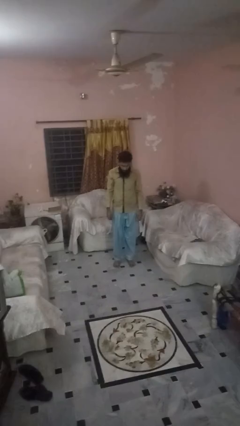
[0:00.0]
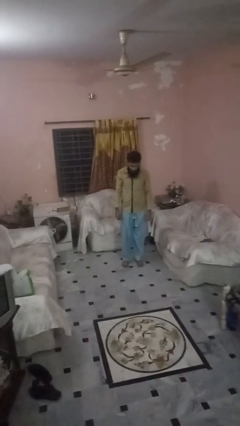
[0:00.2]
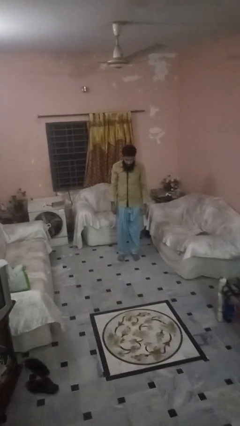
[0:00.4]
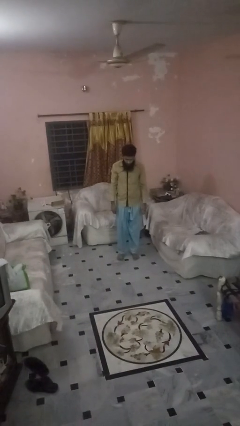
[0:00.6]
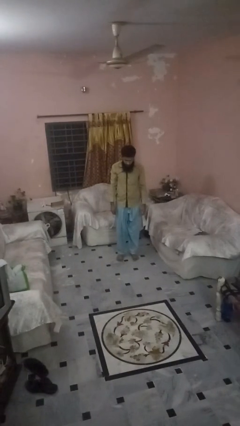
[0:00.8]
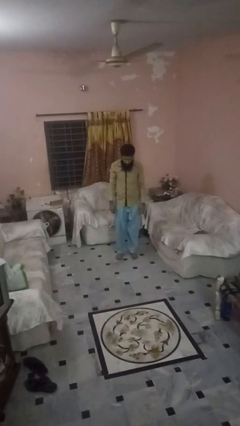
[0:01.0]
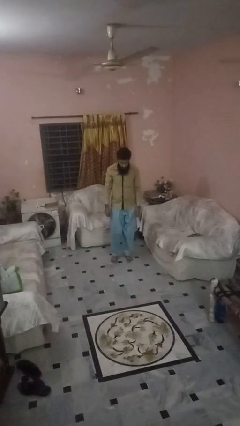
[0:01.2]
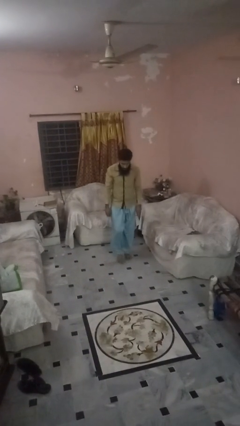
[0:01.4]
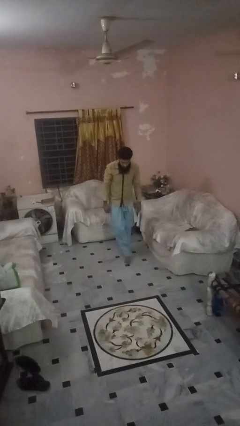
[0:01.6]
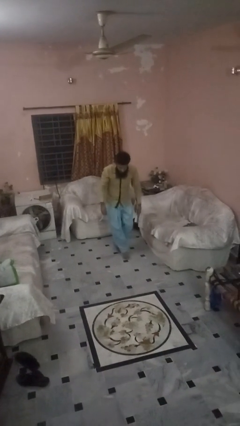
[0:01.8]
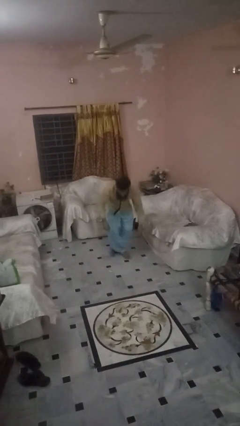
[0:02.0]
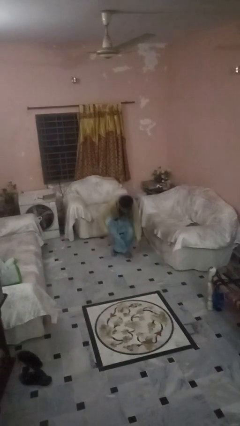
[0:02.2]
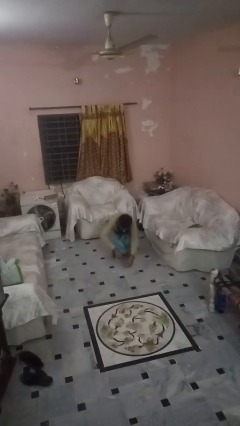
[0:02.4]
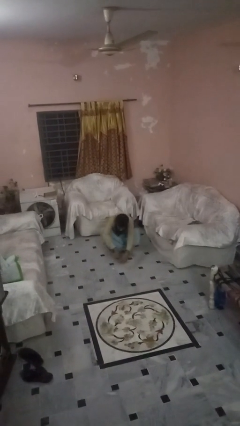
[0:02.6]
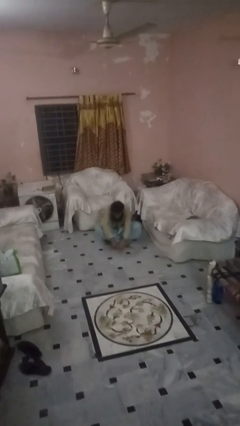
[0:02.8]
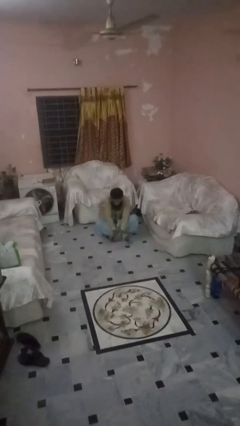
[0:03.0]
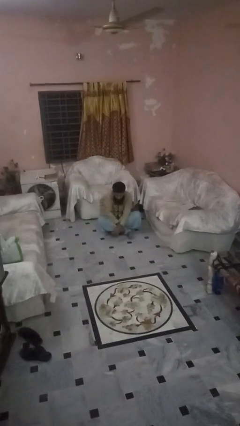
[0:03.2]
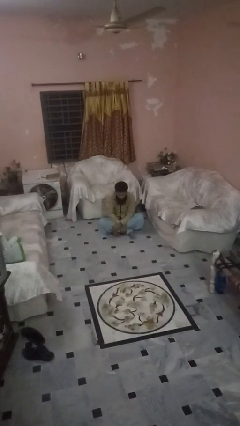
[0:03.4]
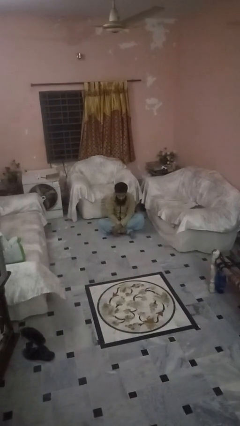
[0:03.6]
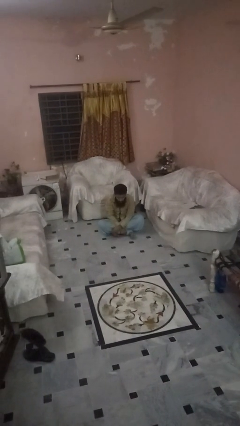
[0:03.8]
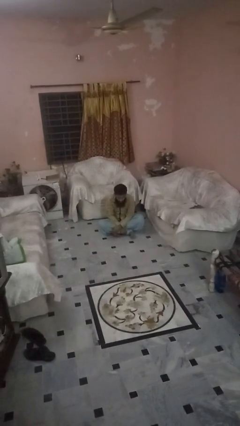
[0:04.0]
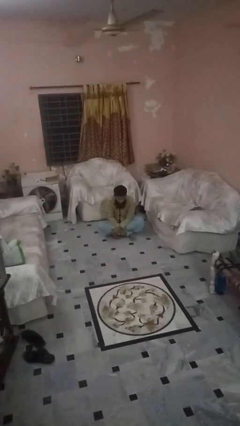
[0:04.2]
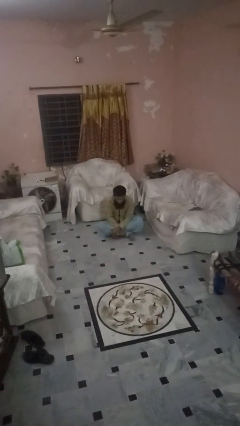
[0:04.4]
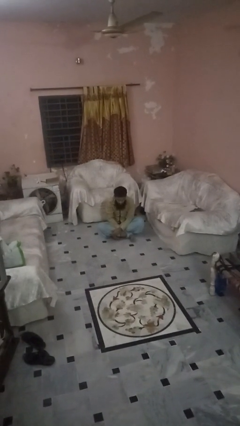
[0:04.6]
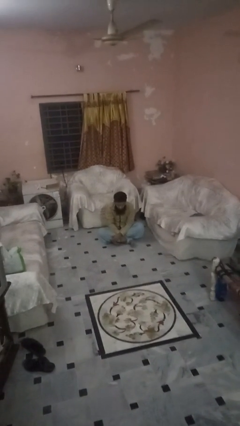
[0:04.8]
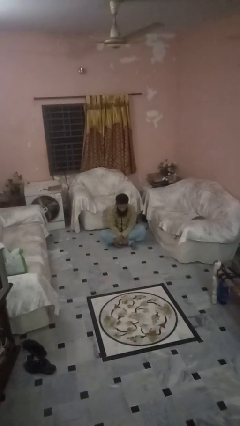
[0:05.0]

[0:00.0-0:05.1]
person sits crisscross

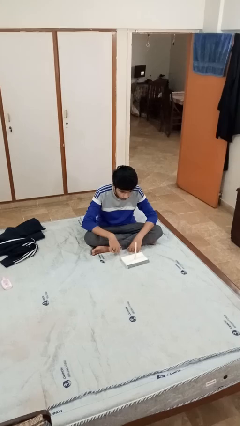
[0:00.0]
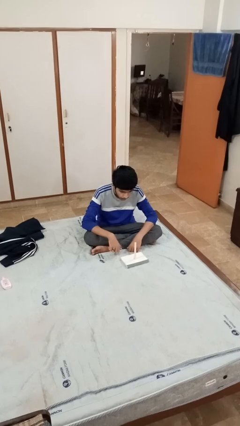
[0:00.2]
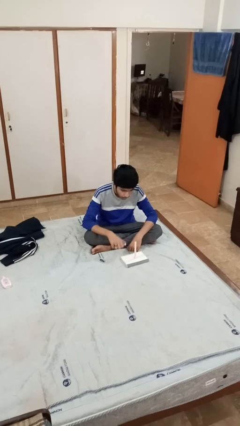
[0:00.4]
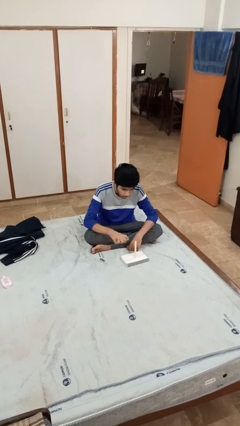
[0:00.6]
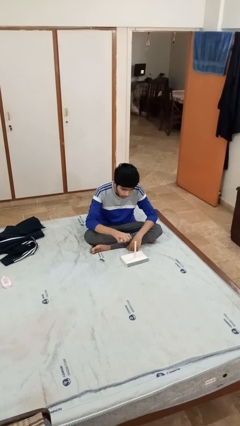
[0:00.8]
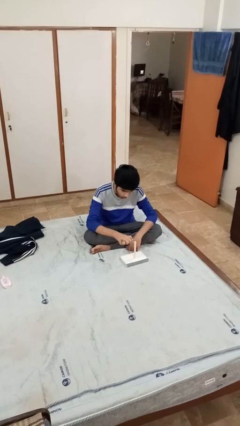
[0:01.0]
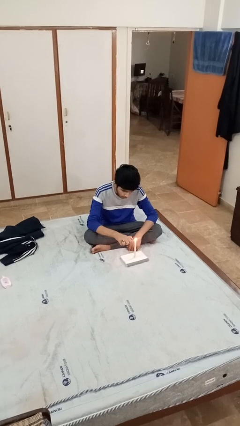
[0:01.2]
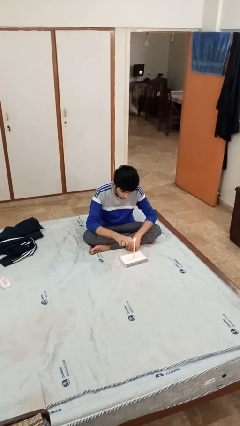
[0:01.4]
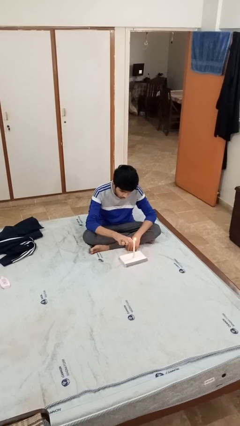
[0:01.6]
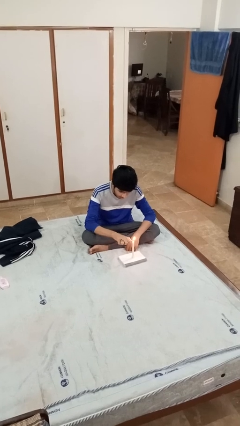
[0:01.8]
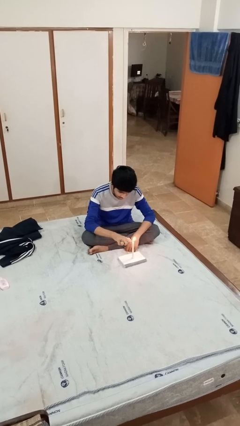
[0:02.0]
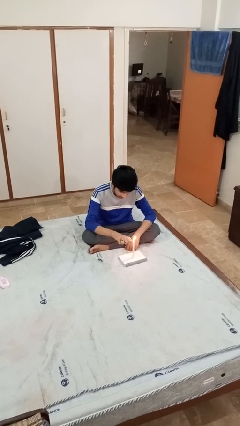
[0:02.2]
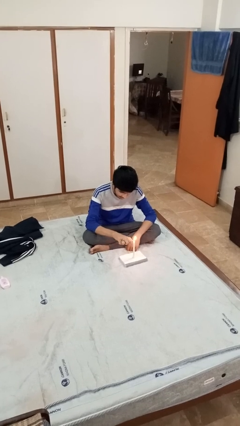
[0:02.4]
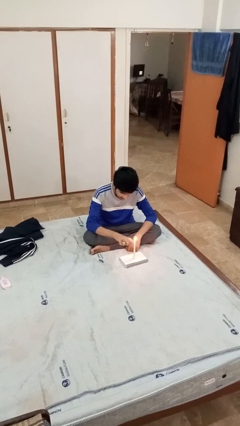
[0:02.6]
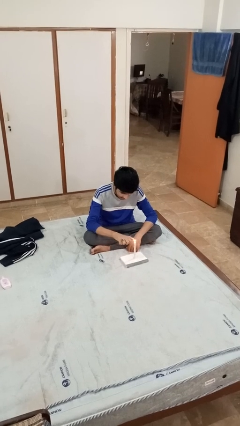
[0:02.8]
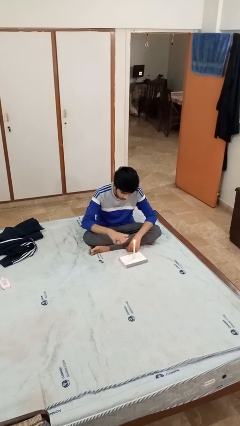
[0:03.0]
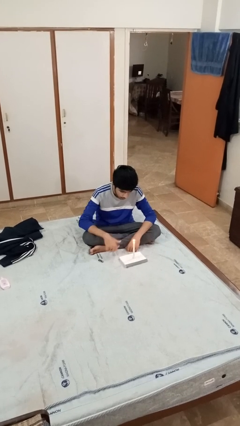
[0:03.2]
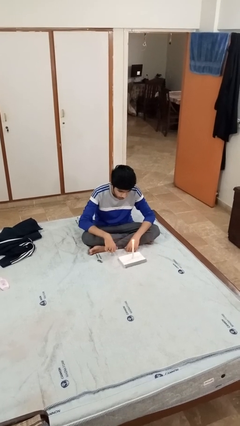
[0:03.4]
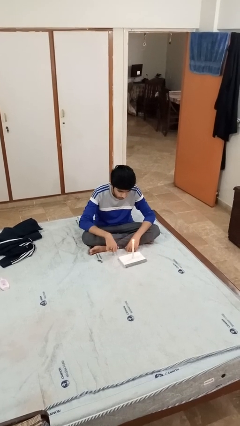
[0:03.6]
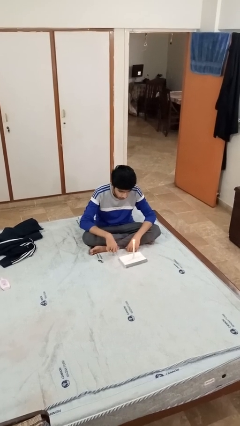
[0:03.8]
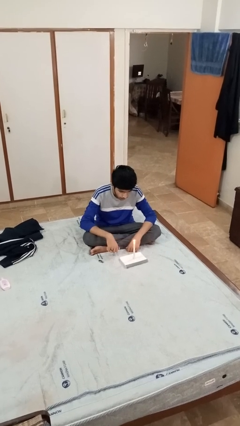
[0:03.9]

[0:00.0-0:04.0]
person lights candle

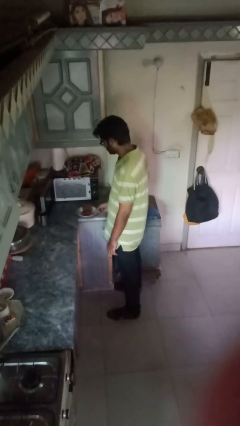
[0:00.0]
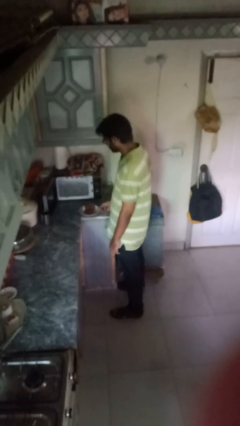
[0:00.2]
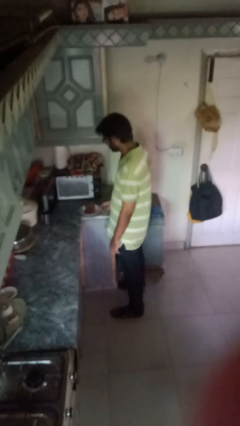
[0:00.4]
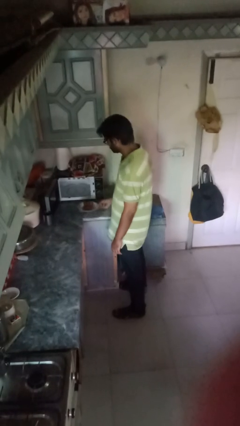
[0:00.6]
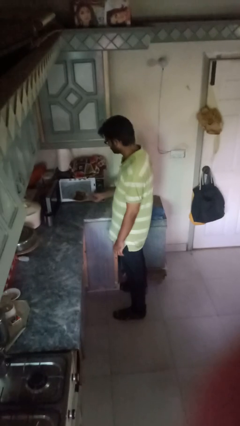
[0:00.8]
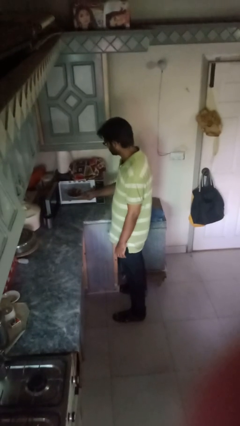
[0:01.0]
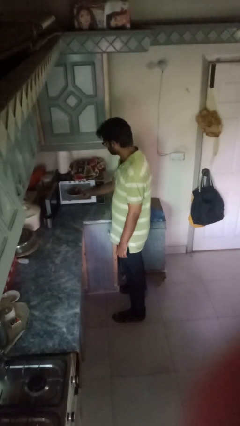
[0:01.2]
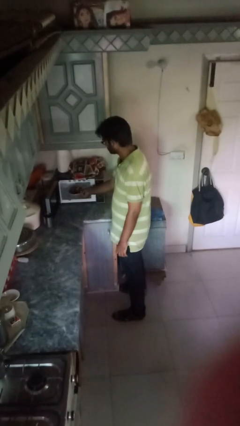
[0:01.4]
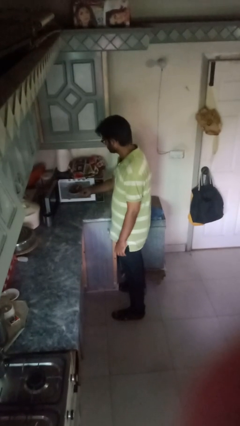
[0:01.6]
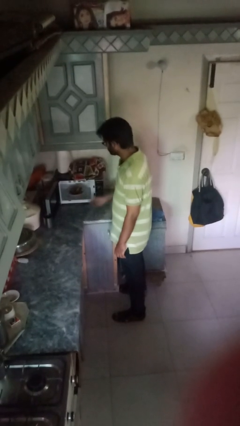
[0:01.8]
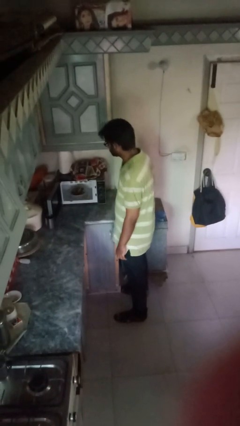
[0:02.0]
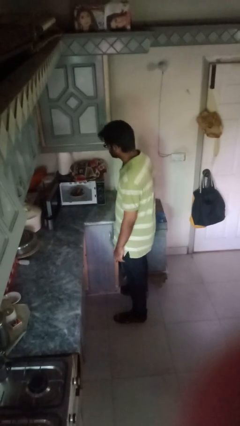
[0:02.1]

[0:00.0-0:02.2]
person puts object into oven

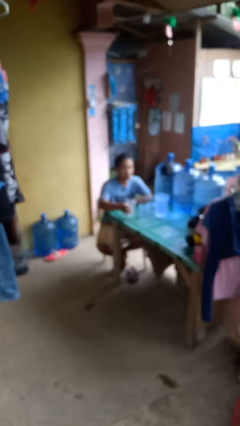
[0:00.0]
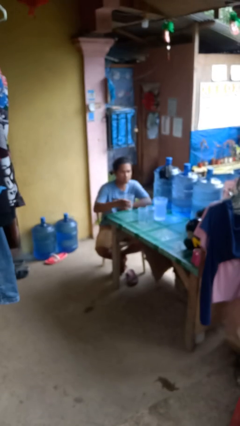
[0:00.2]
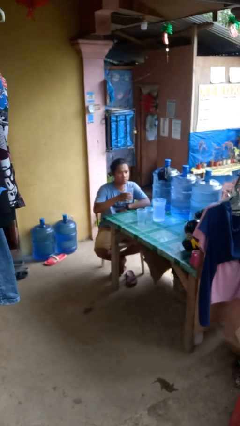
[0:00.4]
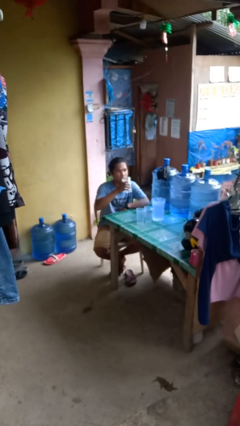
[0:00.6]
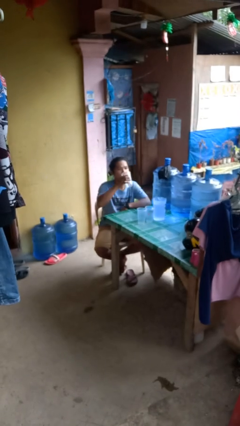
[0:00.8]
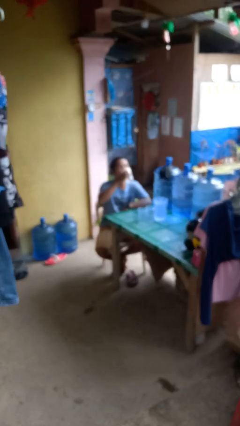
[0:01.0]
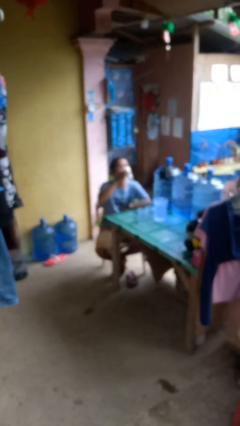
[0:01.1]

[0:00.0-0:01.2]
person picks up object from table

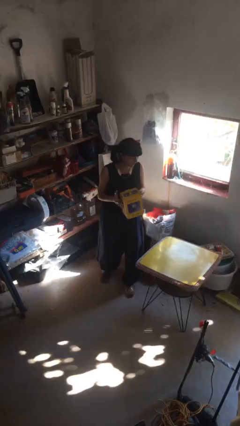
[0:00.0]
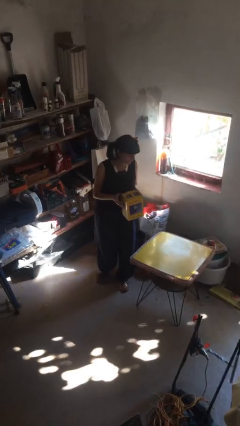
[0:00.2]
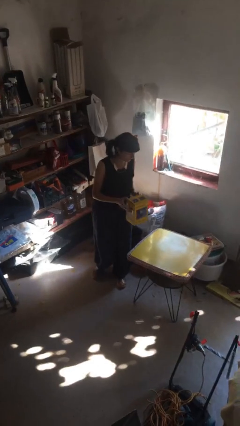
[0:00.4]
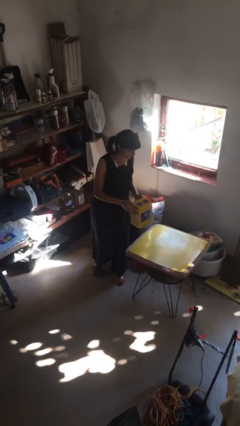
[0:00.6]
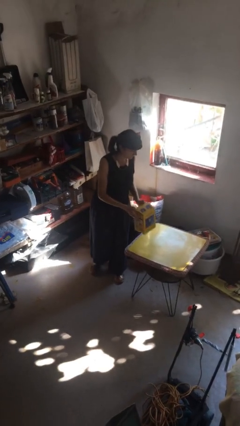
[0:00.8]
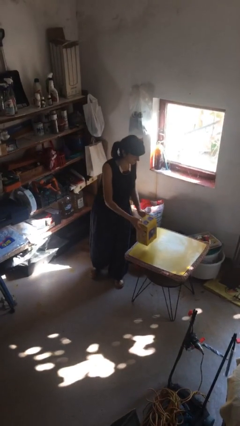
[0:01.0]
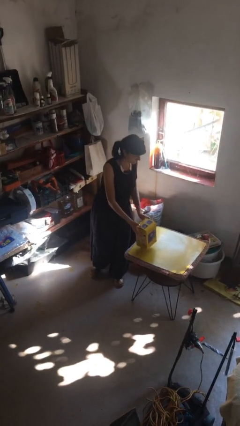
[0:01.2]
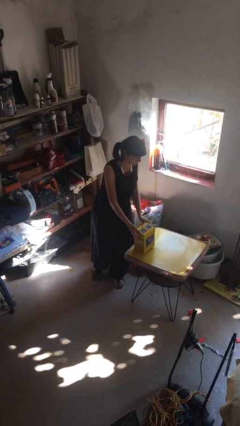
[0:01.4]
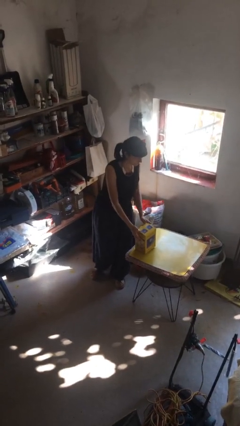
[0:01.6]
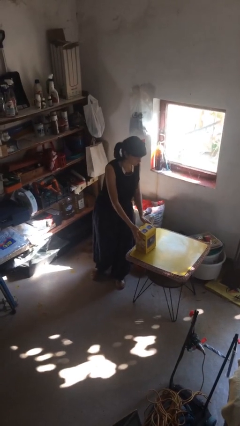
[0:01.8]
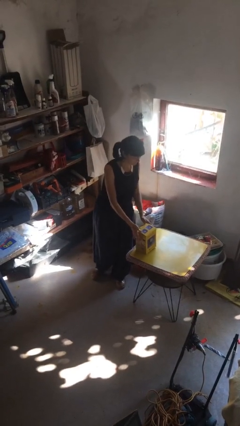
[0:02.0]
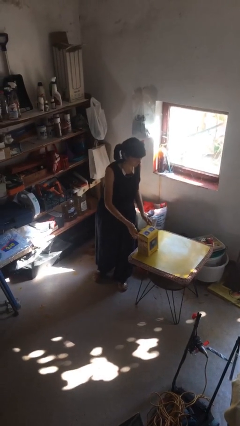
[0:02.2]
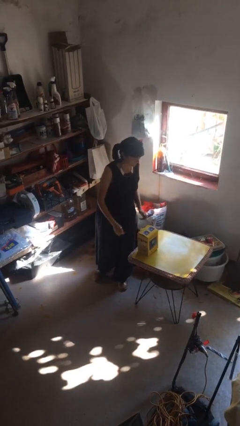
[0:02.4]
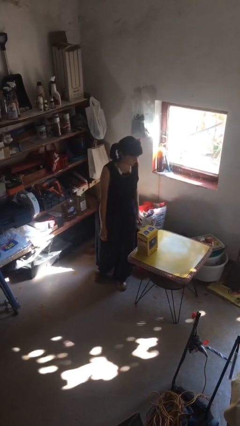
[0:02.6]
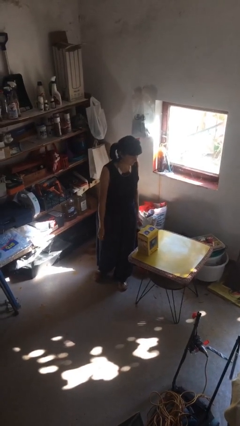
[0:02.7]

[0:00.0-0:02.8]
person puts down object on table

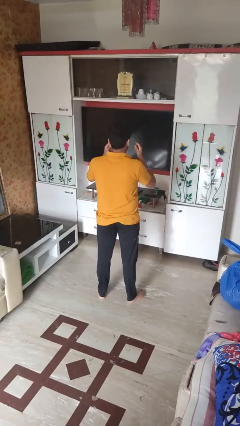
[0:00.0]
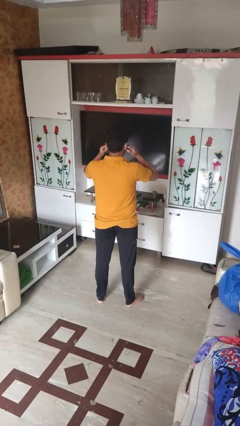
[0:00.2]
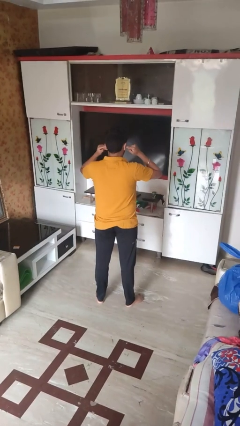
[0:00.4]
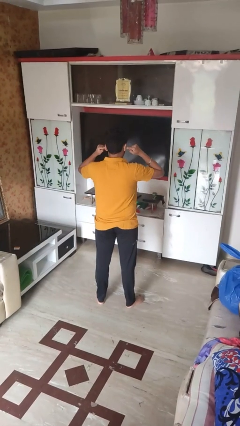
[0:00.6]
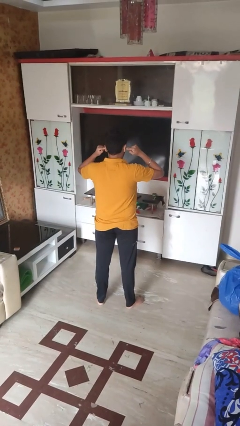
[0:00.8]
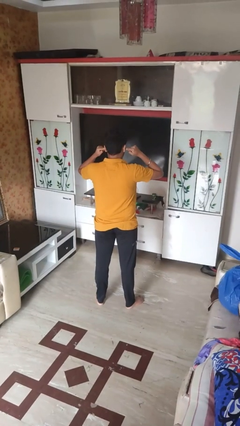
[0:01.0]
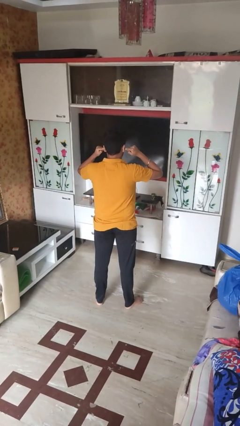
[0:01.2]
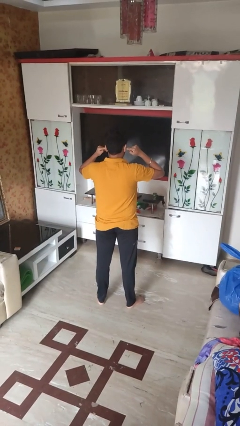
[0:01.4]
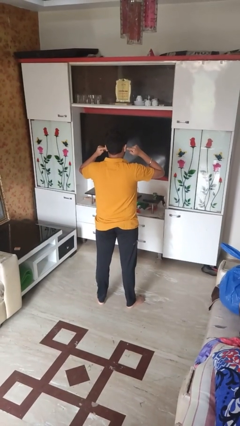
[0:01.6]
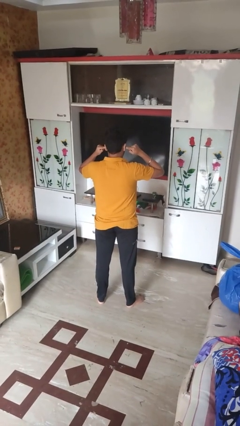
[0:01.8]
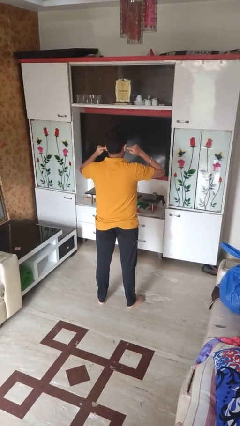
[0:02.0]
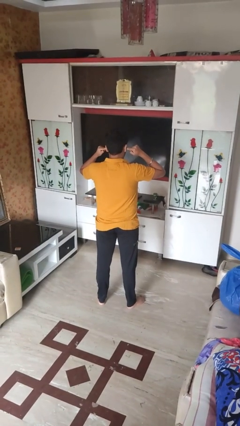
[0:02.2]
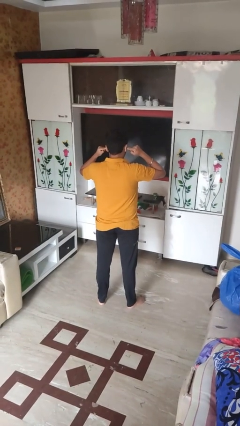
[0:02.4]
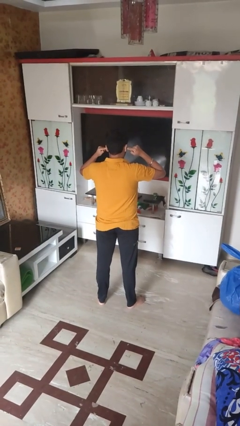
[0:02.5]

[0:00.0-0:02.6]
person puts fingers in ear
